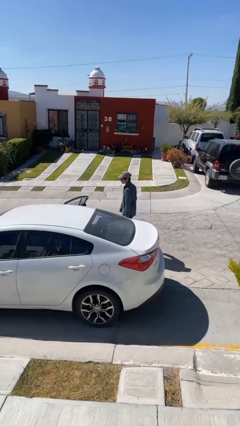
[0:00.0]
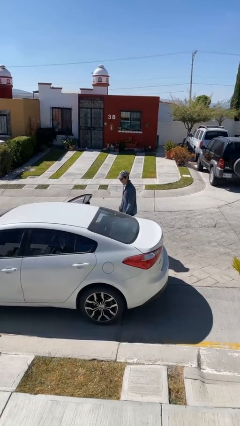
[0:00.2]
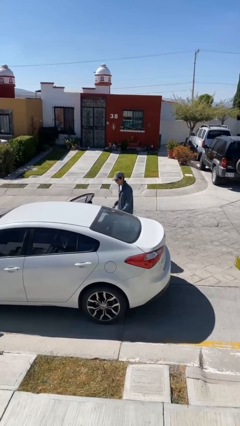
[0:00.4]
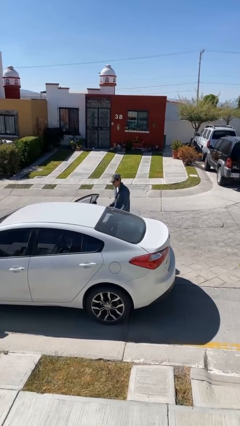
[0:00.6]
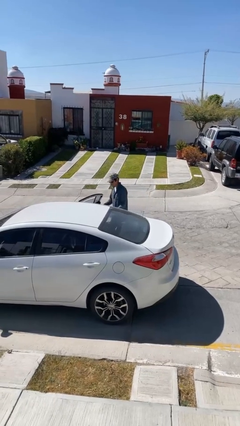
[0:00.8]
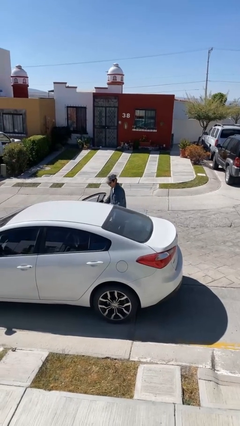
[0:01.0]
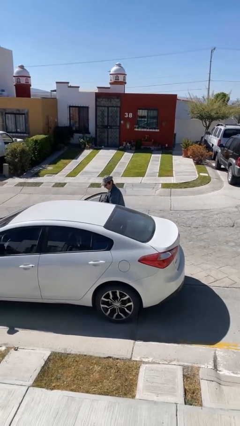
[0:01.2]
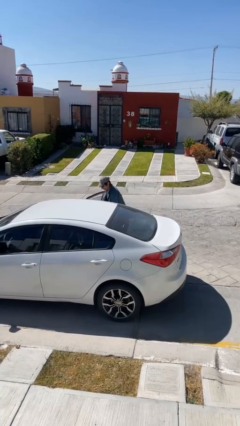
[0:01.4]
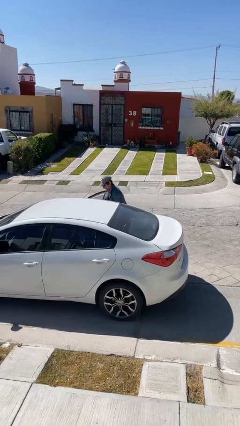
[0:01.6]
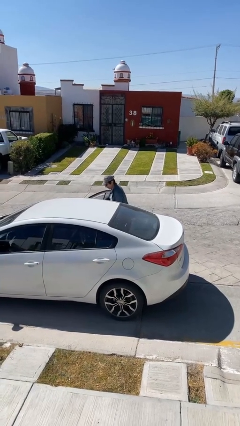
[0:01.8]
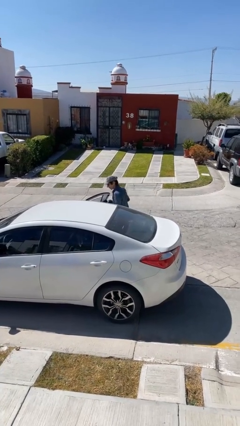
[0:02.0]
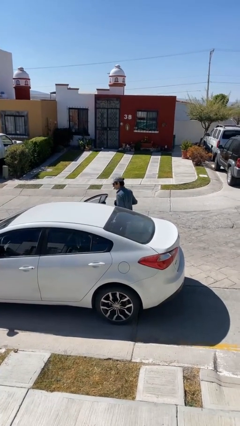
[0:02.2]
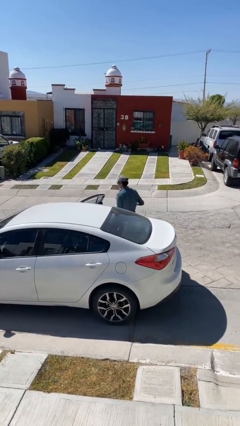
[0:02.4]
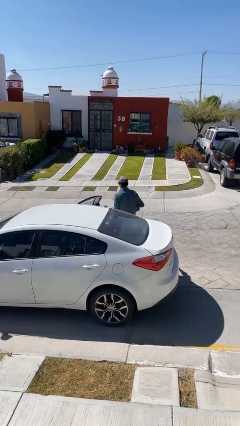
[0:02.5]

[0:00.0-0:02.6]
person unloads car

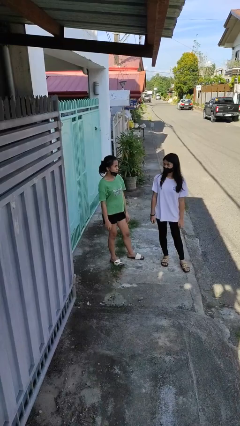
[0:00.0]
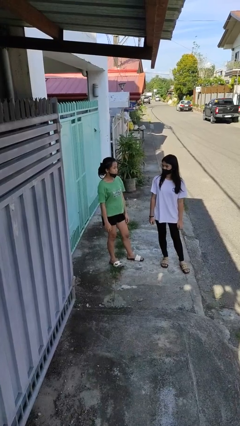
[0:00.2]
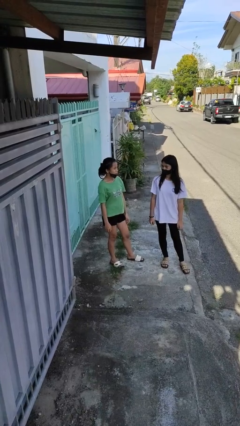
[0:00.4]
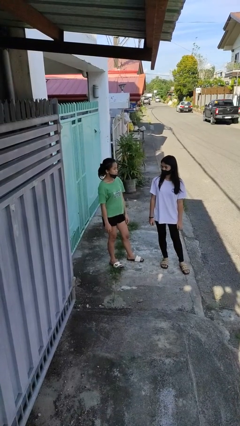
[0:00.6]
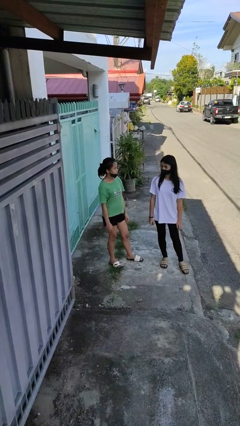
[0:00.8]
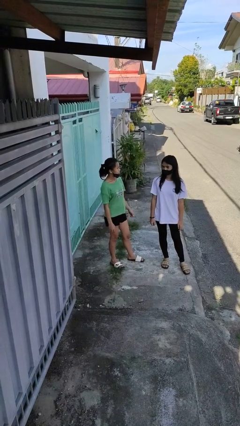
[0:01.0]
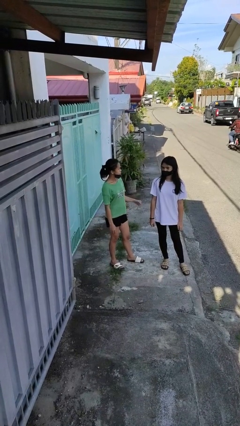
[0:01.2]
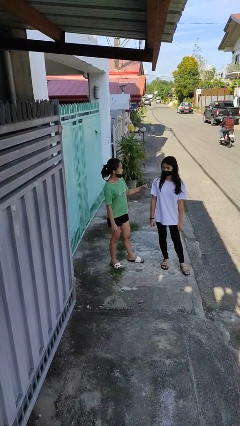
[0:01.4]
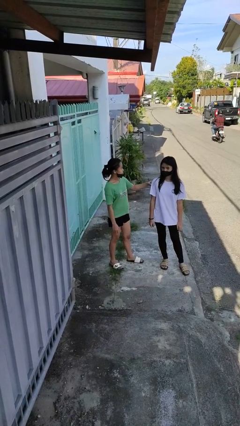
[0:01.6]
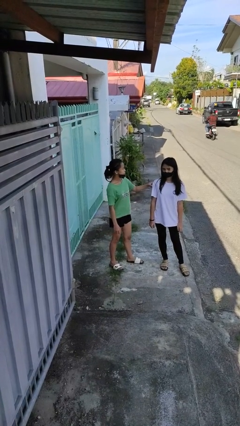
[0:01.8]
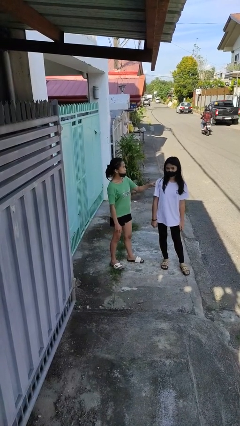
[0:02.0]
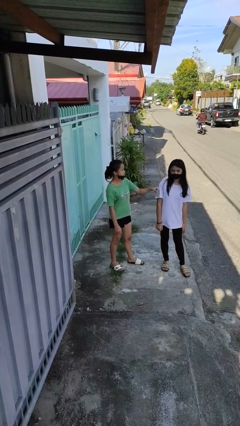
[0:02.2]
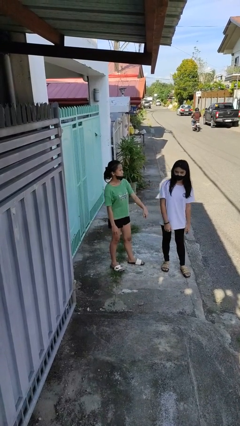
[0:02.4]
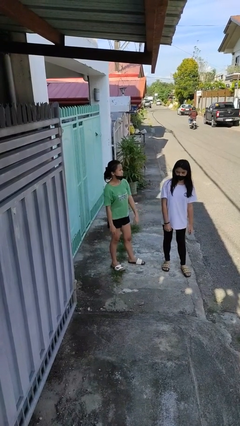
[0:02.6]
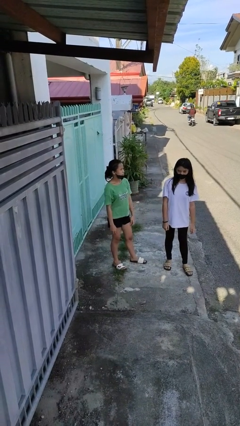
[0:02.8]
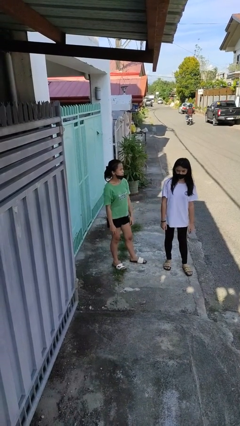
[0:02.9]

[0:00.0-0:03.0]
person pounds shoulders of person

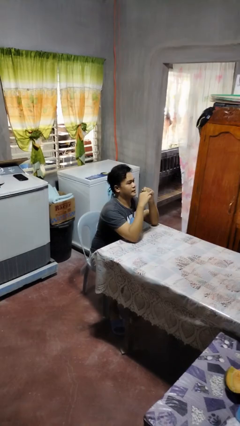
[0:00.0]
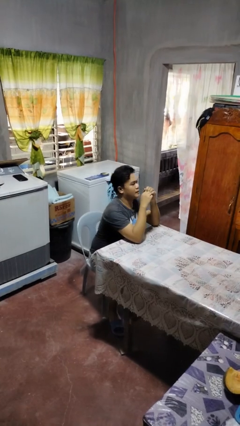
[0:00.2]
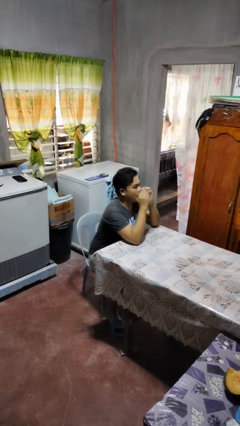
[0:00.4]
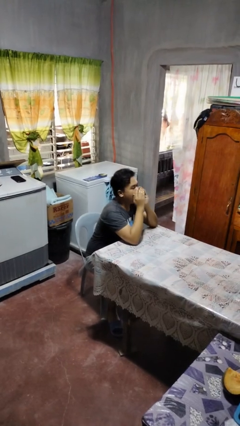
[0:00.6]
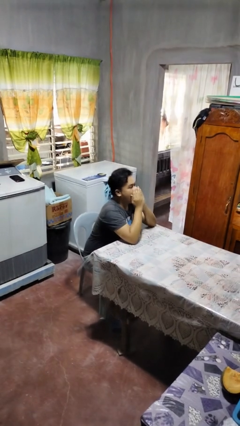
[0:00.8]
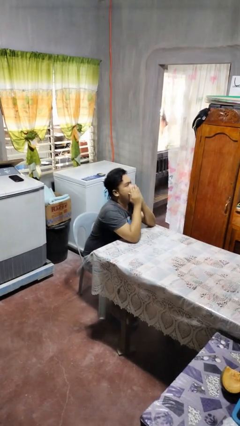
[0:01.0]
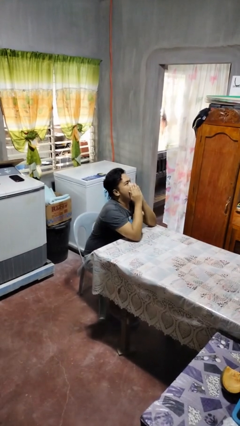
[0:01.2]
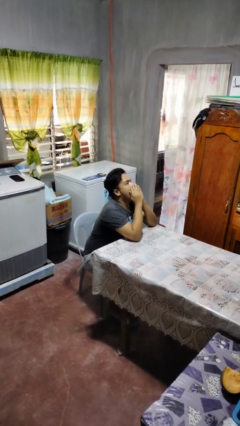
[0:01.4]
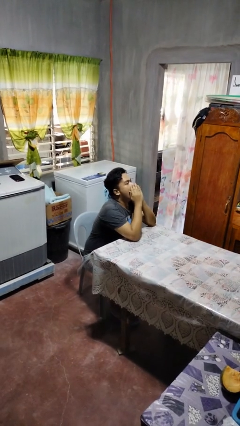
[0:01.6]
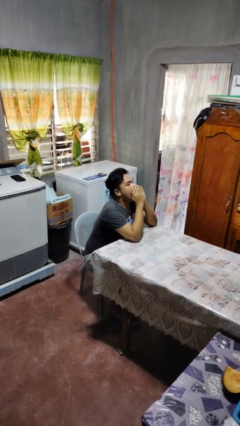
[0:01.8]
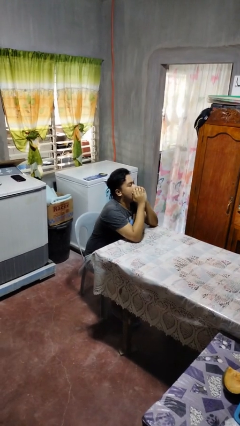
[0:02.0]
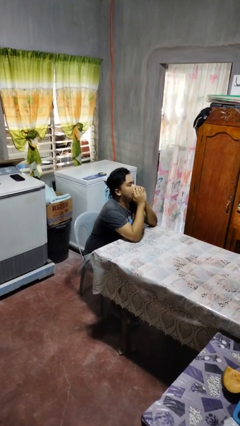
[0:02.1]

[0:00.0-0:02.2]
person yawns

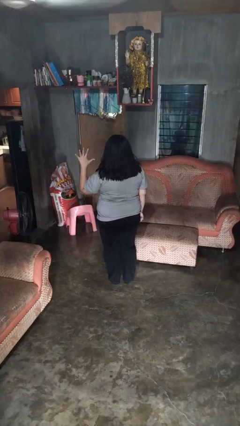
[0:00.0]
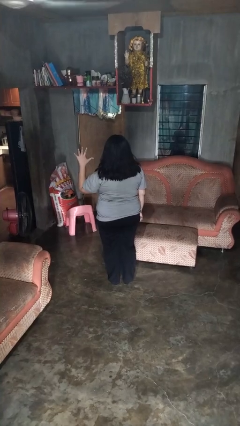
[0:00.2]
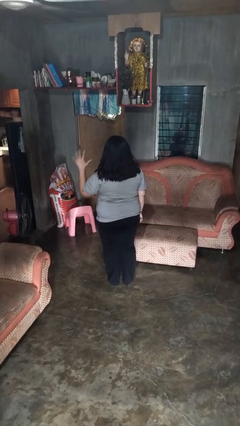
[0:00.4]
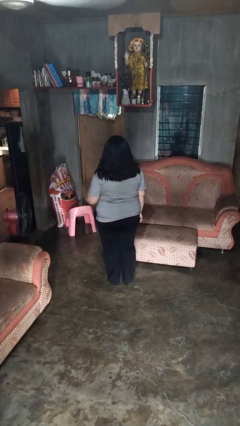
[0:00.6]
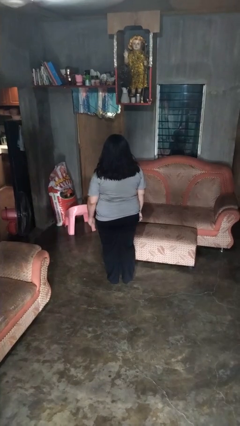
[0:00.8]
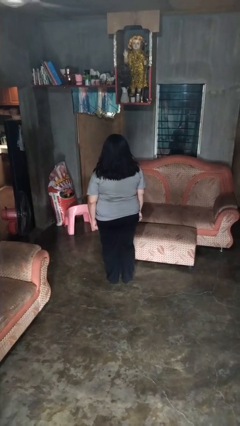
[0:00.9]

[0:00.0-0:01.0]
person gestures number five

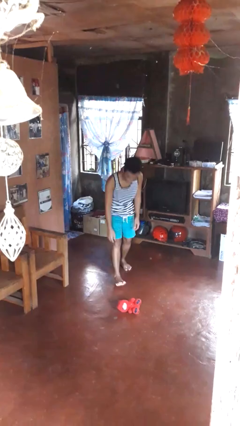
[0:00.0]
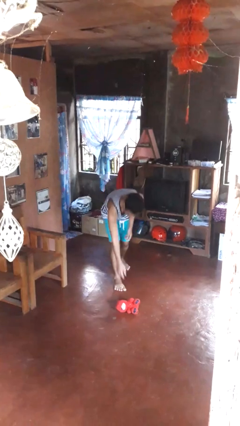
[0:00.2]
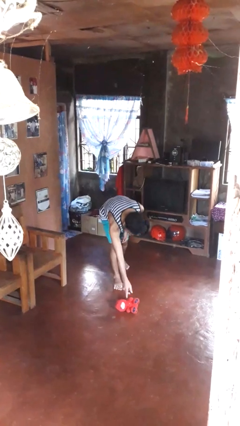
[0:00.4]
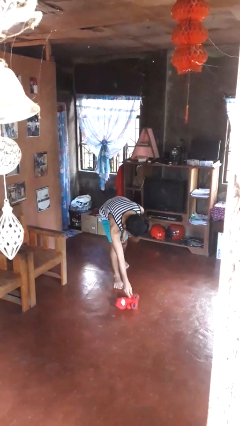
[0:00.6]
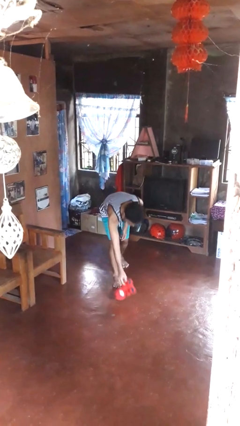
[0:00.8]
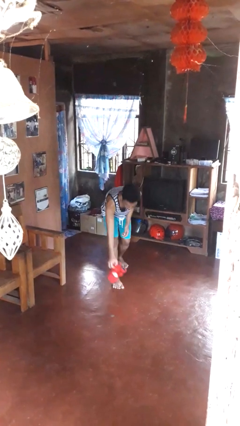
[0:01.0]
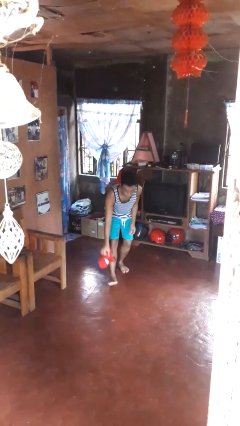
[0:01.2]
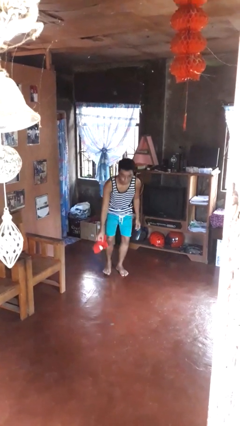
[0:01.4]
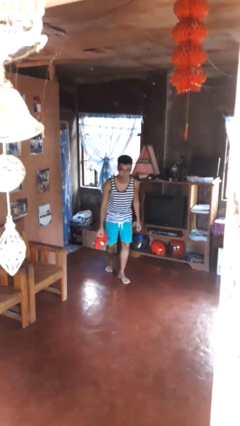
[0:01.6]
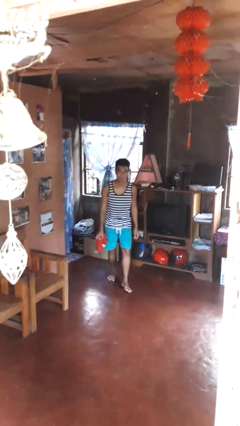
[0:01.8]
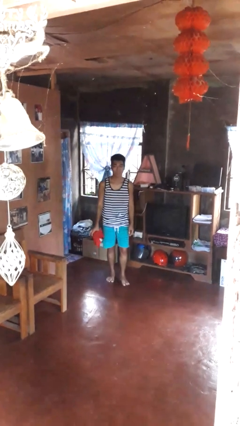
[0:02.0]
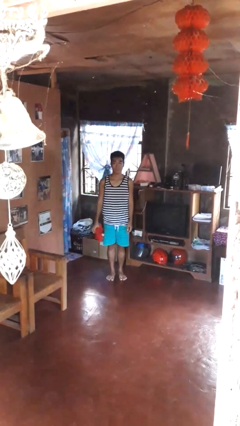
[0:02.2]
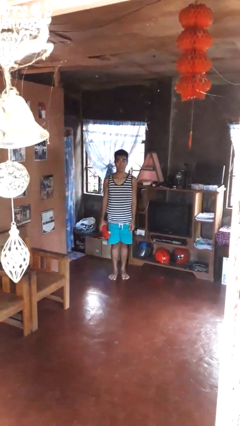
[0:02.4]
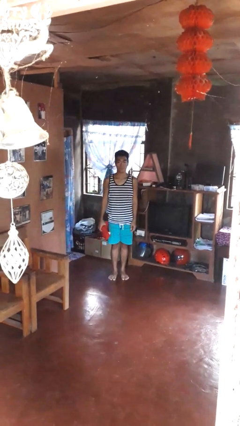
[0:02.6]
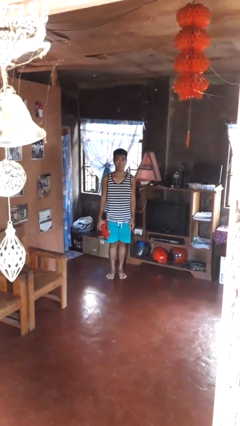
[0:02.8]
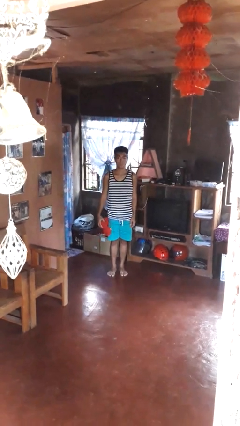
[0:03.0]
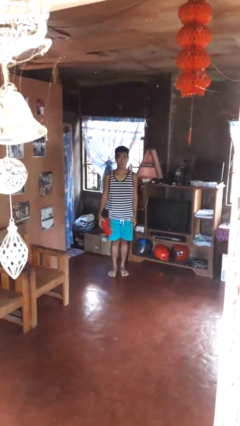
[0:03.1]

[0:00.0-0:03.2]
person picks up object from floor

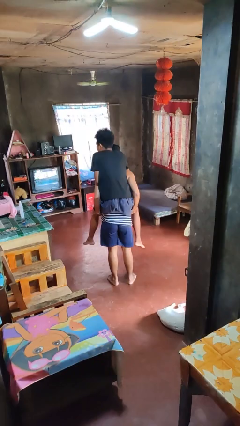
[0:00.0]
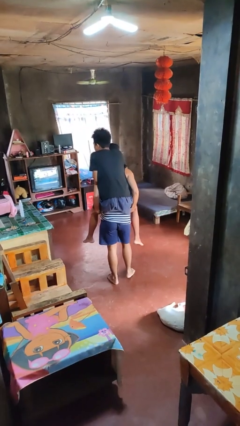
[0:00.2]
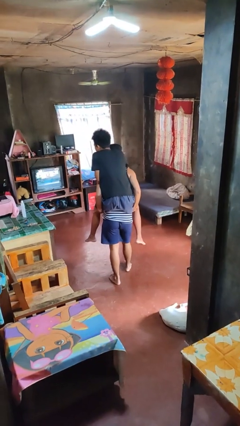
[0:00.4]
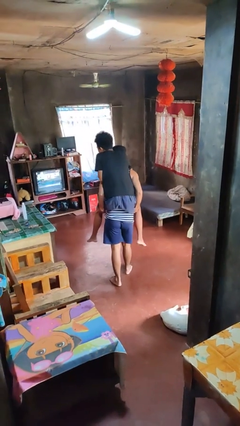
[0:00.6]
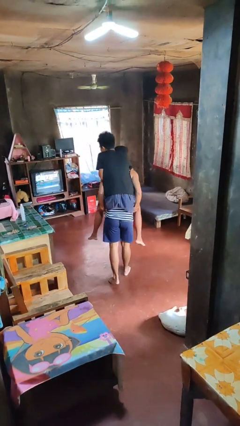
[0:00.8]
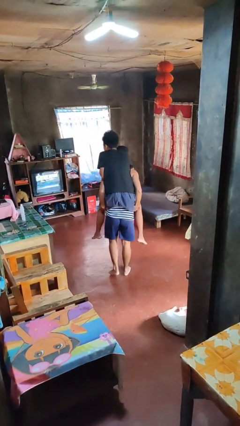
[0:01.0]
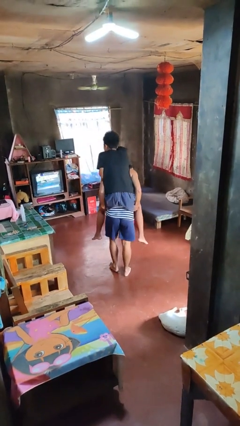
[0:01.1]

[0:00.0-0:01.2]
person carries person on back

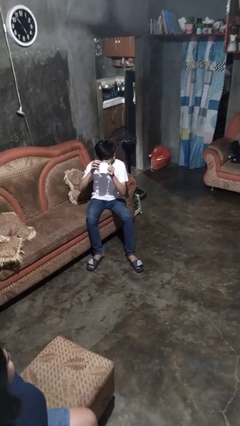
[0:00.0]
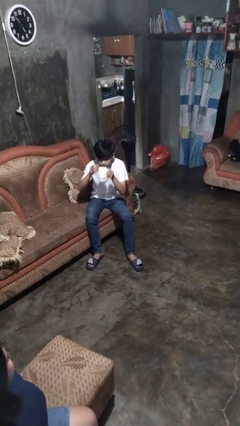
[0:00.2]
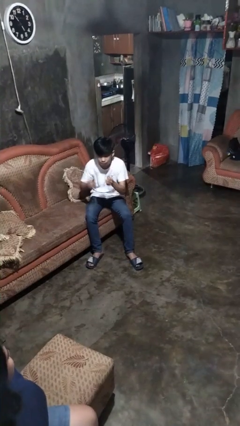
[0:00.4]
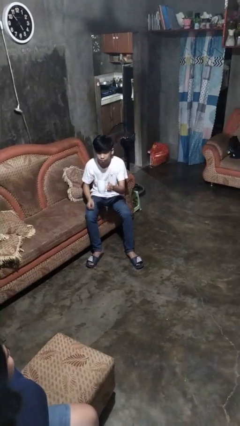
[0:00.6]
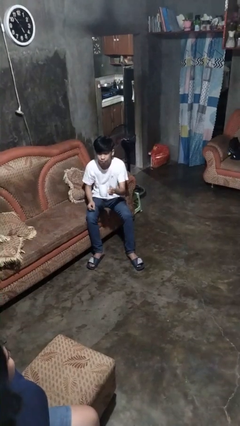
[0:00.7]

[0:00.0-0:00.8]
person stirs mug

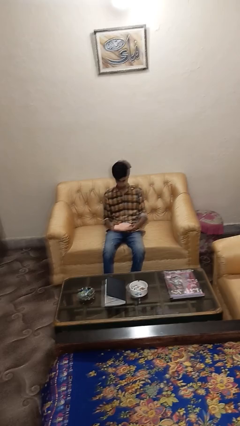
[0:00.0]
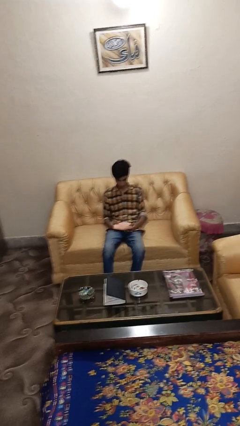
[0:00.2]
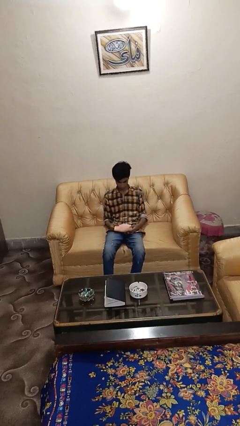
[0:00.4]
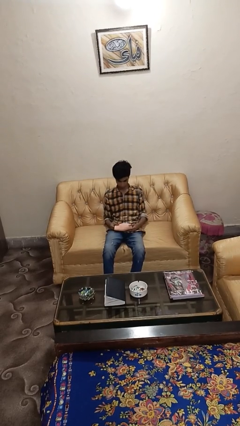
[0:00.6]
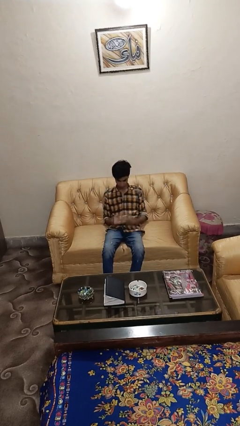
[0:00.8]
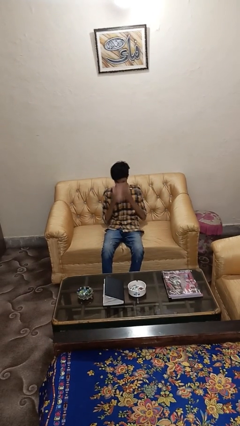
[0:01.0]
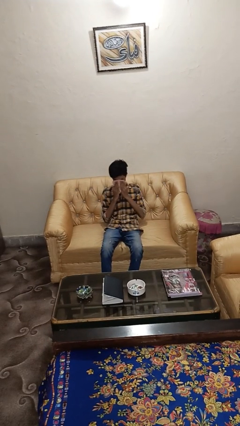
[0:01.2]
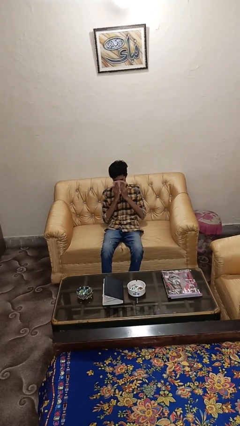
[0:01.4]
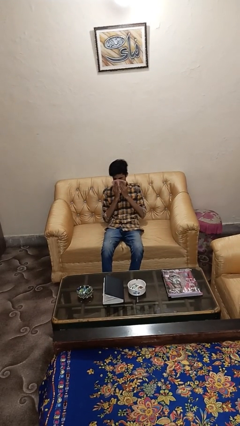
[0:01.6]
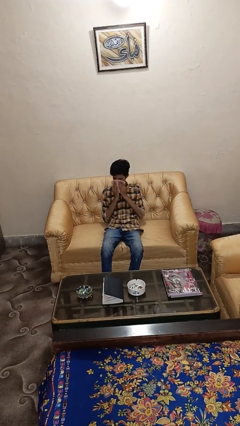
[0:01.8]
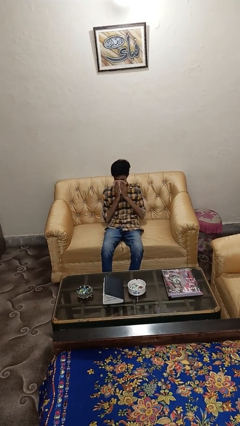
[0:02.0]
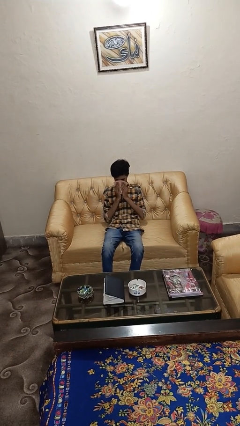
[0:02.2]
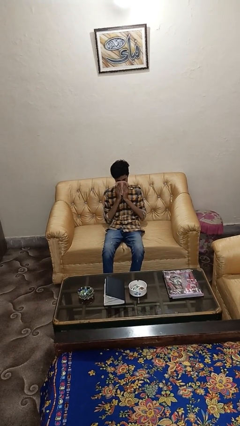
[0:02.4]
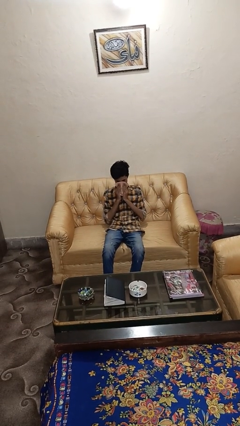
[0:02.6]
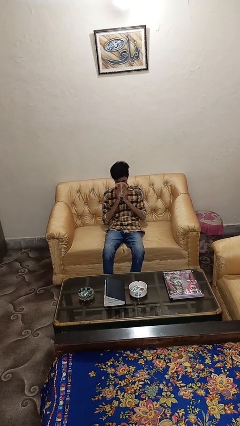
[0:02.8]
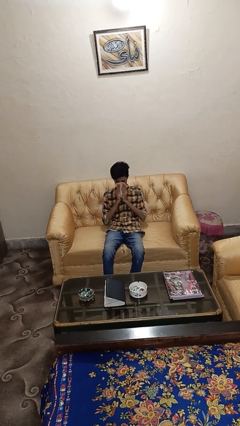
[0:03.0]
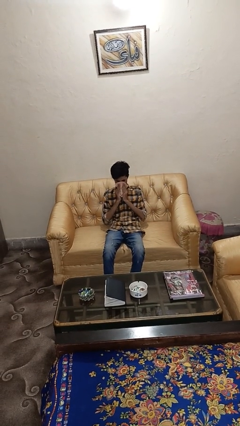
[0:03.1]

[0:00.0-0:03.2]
person blows nose
